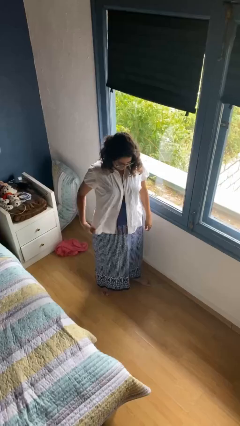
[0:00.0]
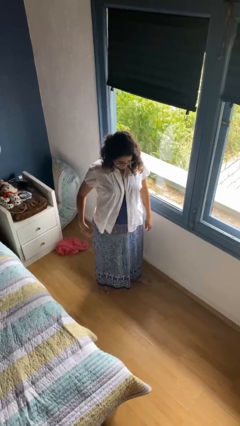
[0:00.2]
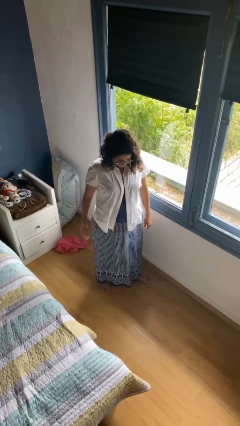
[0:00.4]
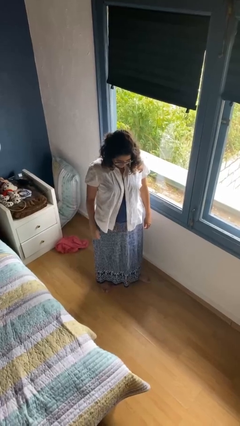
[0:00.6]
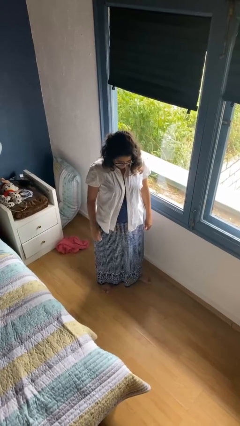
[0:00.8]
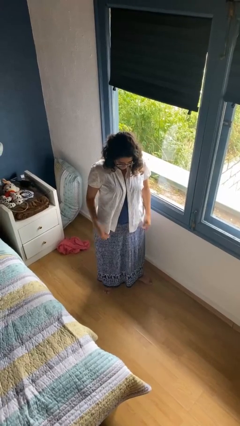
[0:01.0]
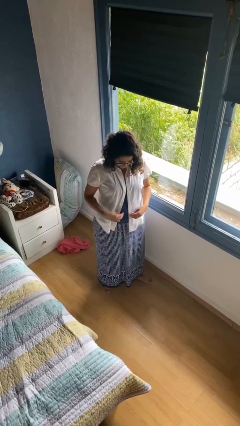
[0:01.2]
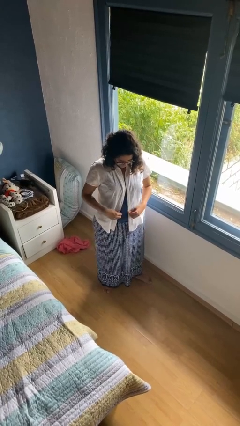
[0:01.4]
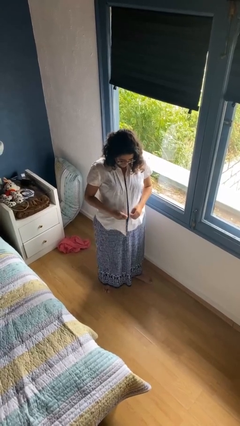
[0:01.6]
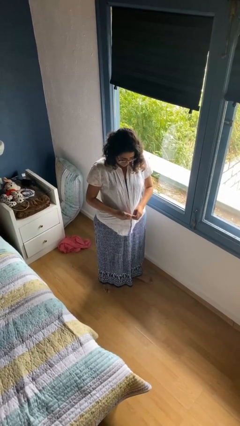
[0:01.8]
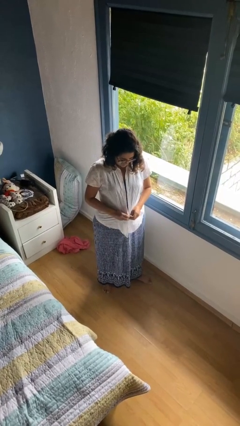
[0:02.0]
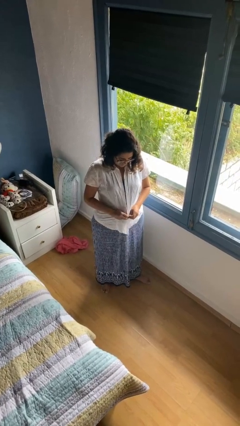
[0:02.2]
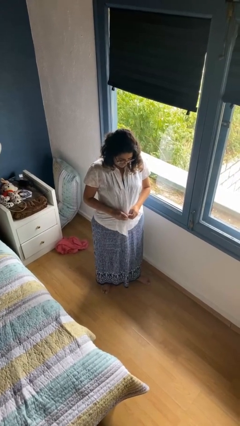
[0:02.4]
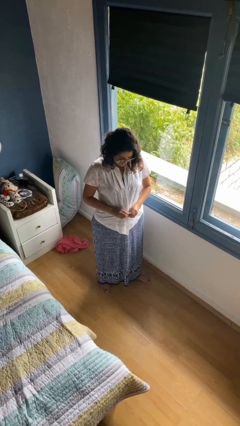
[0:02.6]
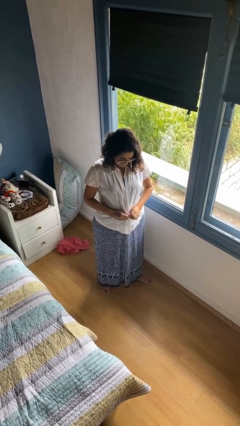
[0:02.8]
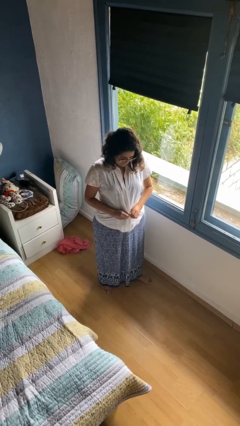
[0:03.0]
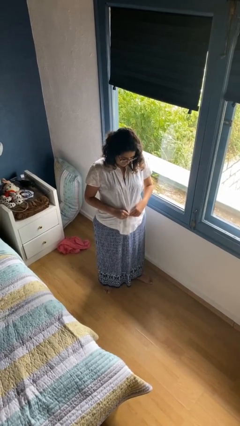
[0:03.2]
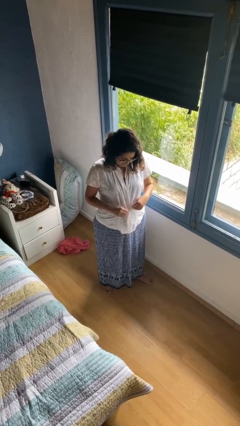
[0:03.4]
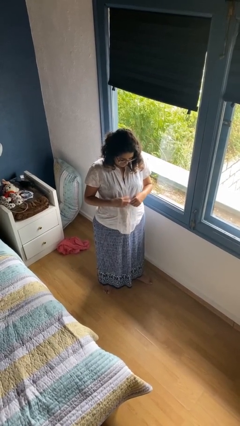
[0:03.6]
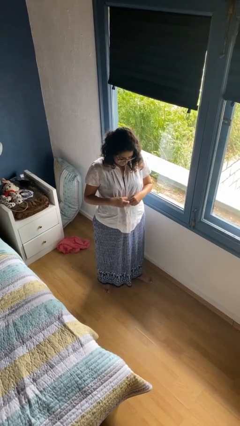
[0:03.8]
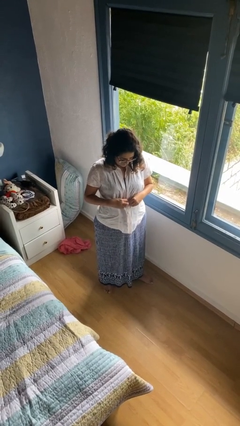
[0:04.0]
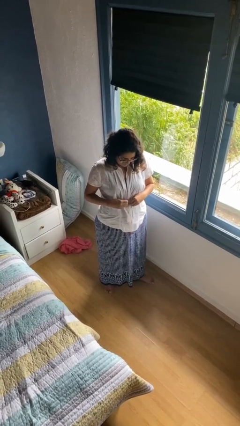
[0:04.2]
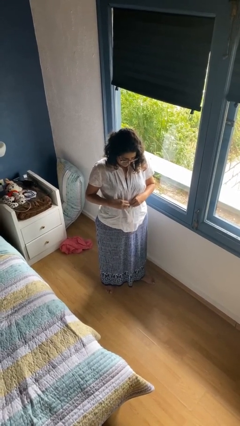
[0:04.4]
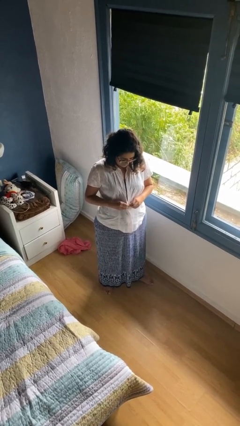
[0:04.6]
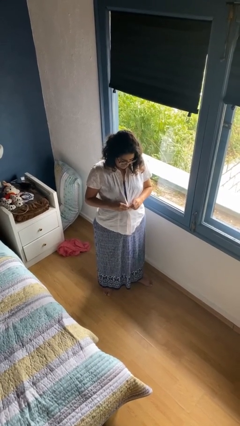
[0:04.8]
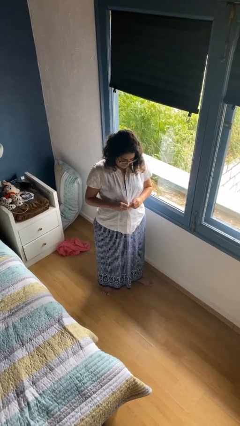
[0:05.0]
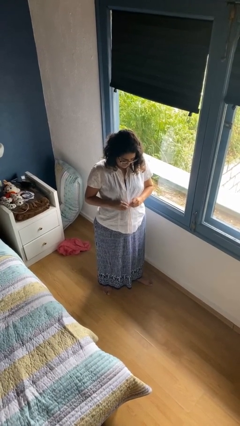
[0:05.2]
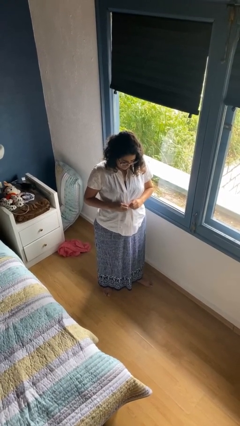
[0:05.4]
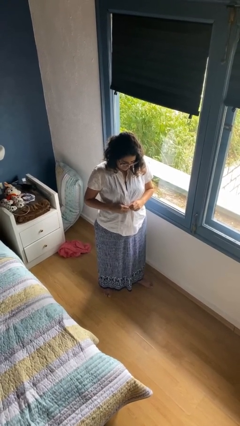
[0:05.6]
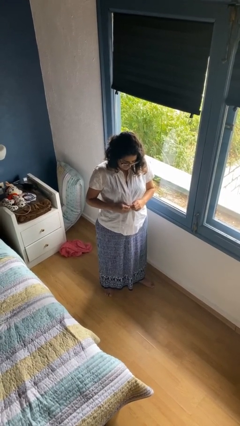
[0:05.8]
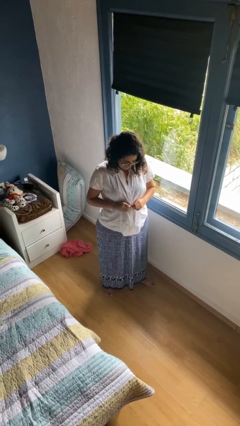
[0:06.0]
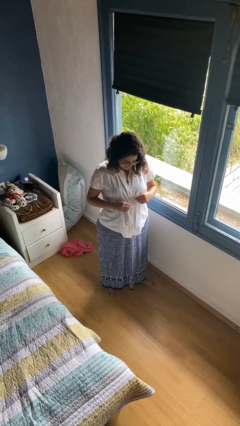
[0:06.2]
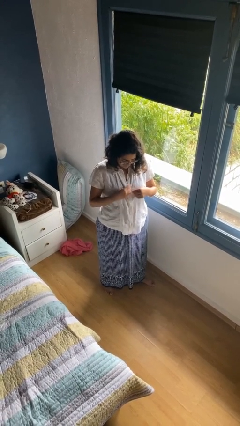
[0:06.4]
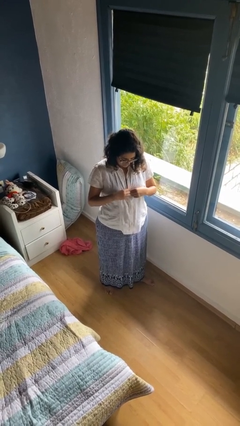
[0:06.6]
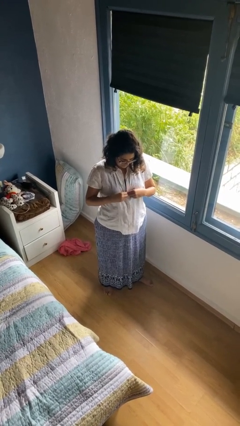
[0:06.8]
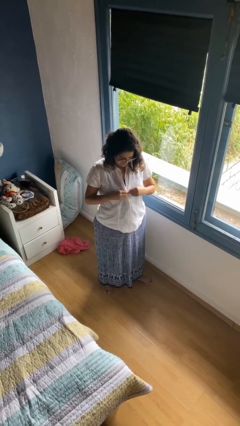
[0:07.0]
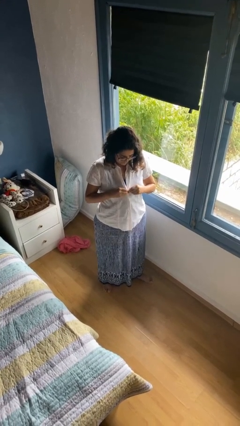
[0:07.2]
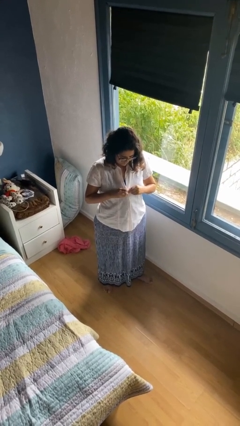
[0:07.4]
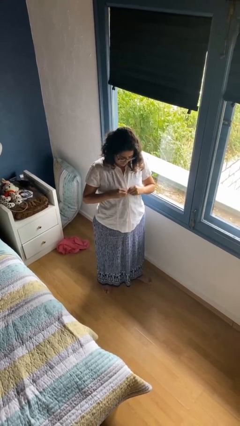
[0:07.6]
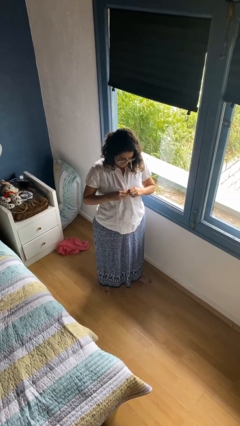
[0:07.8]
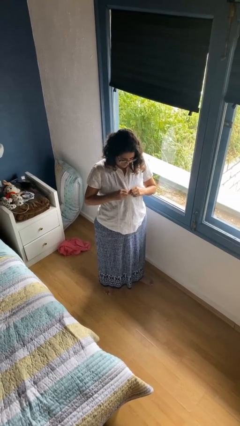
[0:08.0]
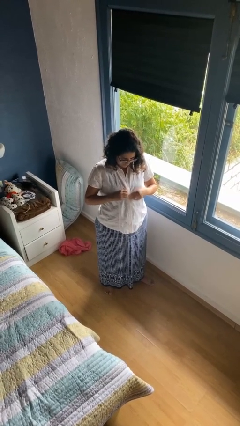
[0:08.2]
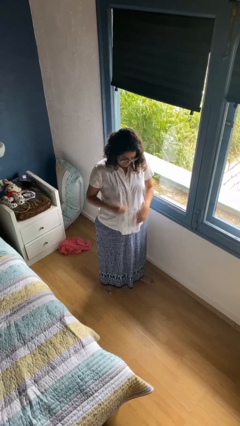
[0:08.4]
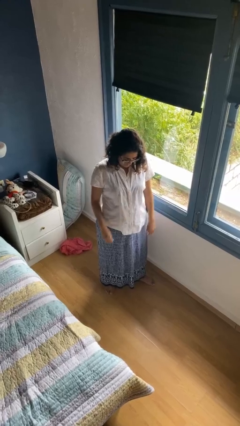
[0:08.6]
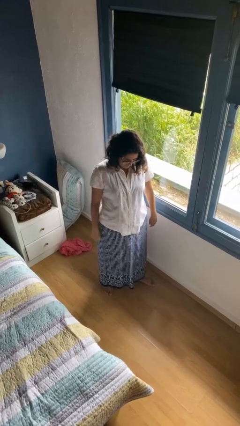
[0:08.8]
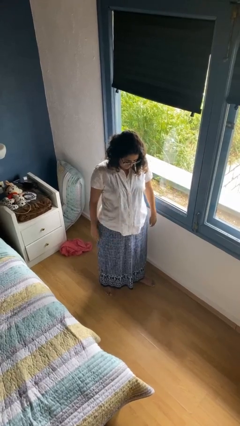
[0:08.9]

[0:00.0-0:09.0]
person buttons shirt

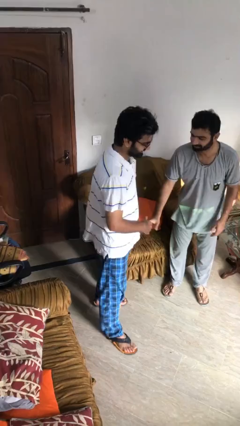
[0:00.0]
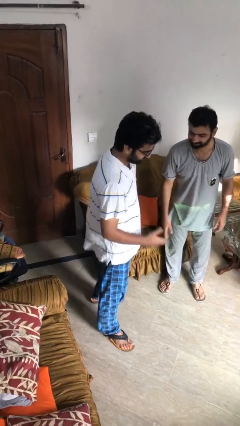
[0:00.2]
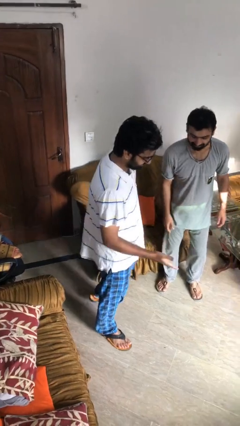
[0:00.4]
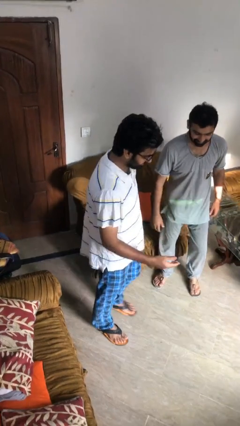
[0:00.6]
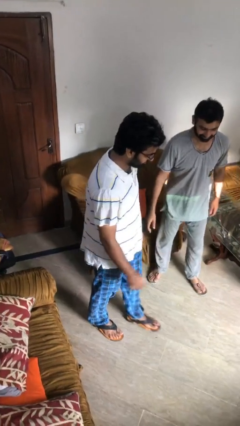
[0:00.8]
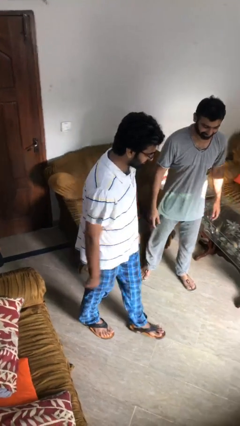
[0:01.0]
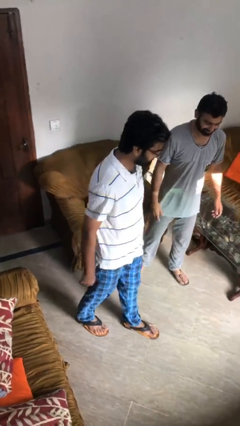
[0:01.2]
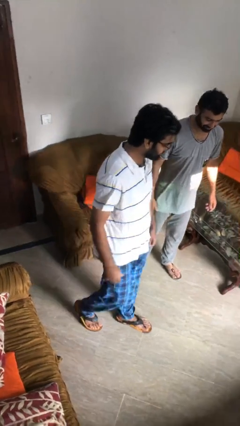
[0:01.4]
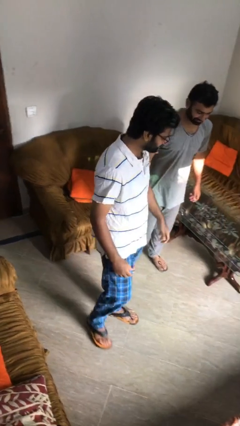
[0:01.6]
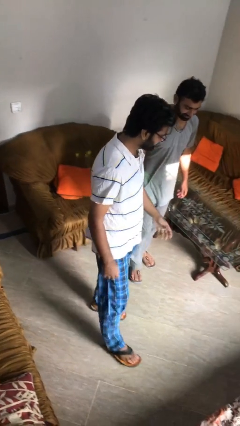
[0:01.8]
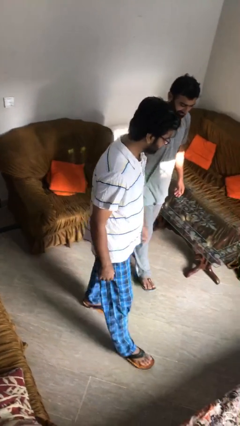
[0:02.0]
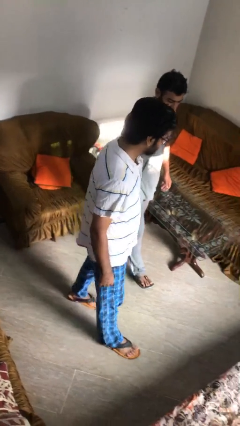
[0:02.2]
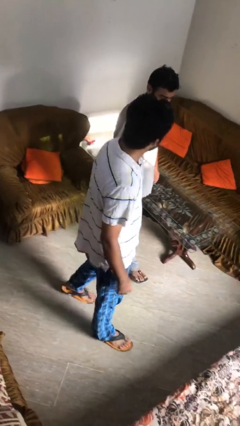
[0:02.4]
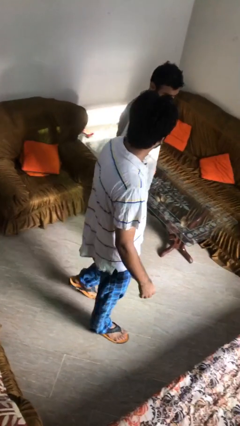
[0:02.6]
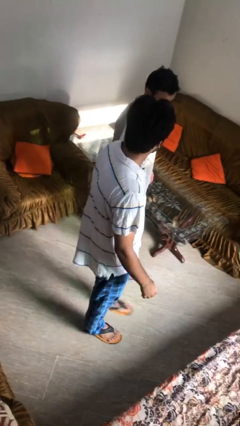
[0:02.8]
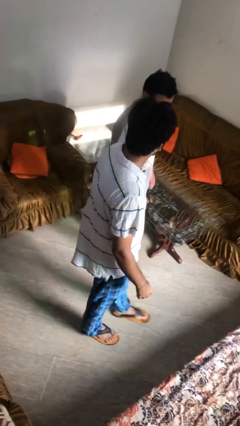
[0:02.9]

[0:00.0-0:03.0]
person talks to person

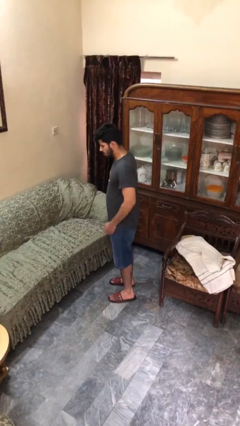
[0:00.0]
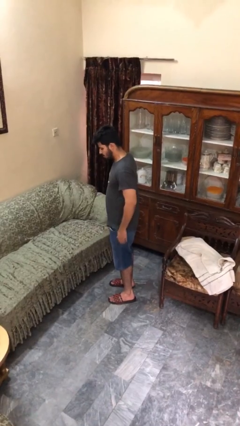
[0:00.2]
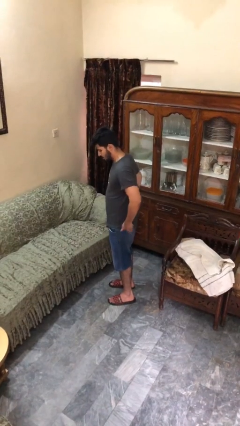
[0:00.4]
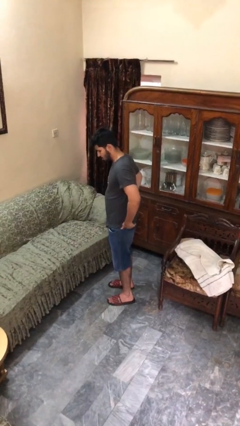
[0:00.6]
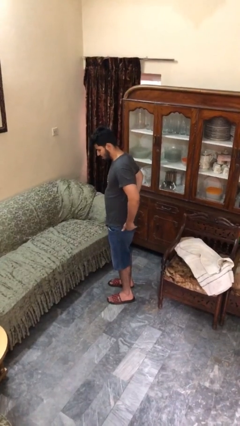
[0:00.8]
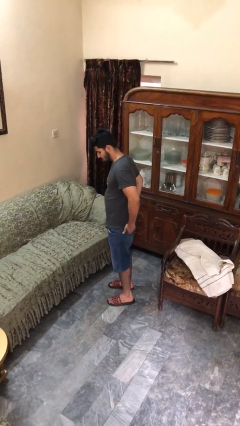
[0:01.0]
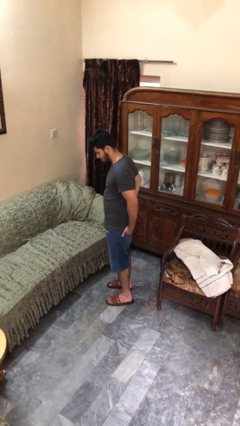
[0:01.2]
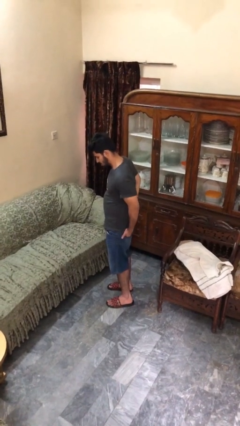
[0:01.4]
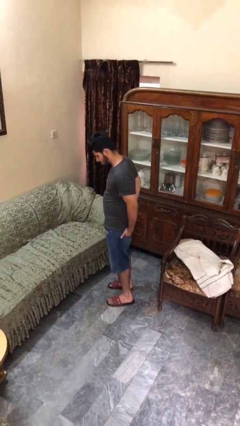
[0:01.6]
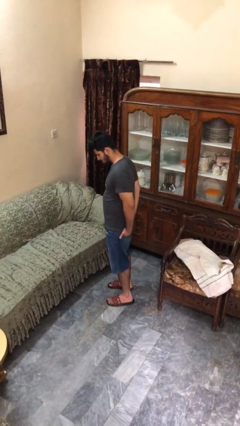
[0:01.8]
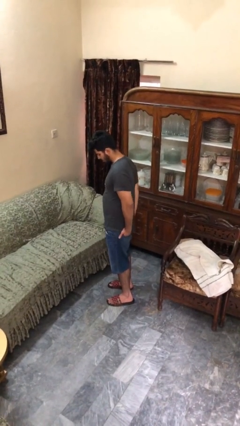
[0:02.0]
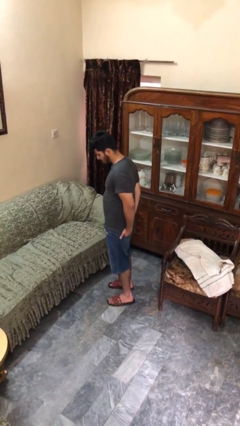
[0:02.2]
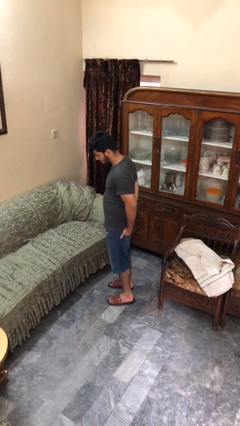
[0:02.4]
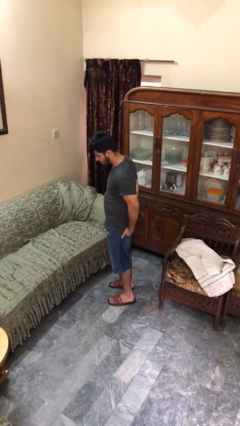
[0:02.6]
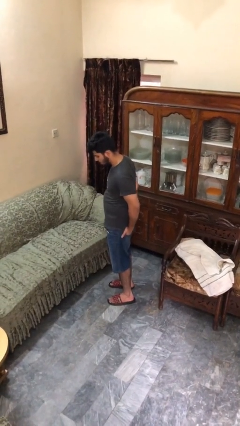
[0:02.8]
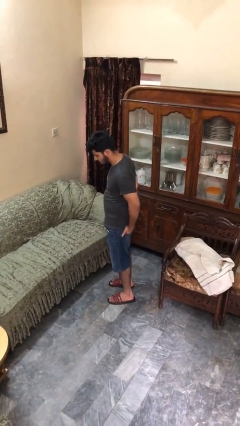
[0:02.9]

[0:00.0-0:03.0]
person puts hands in back pockets

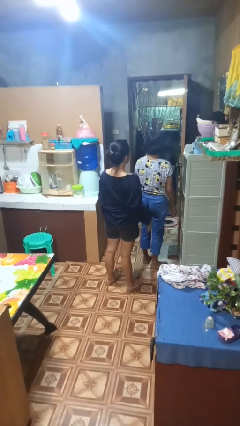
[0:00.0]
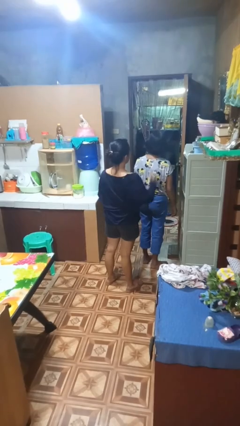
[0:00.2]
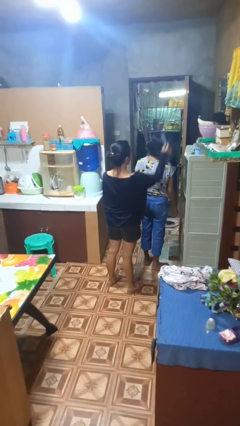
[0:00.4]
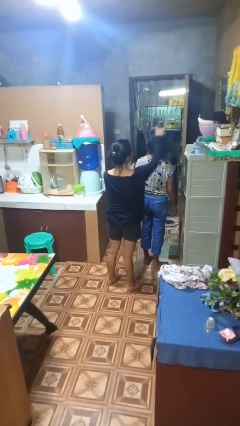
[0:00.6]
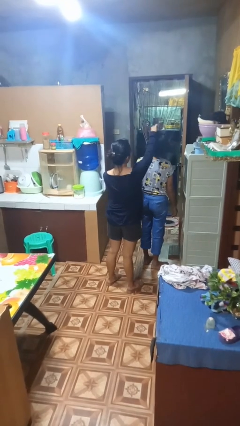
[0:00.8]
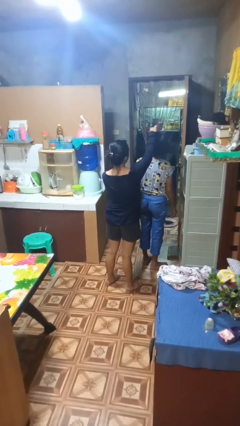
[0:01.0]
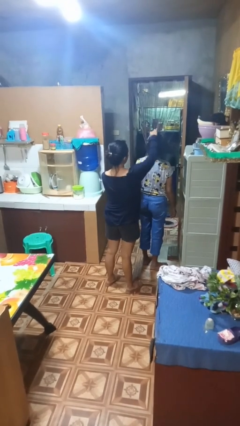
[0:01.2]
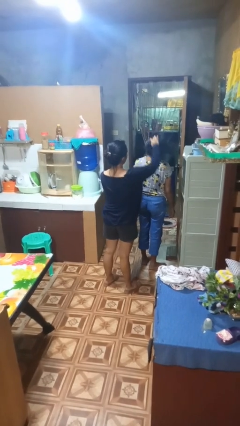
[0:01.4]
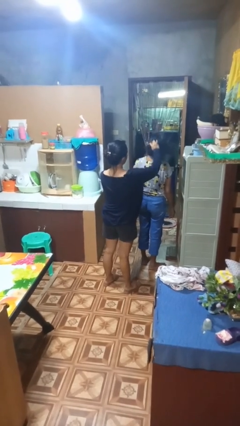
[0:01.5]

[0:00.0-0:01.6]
person brushes hair of person

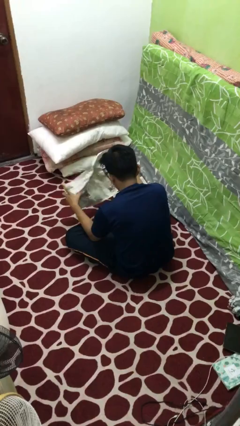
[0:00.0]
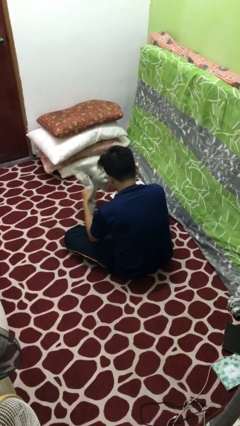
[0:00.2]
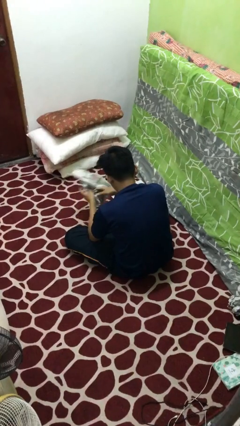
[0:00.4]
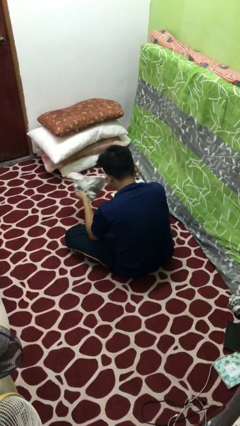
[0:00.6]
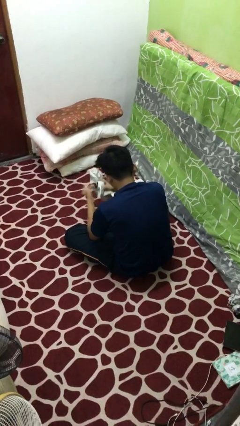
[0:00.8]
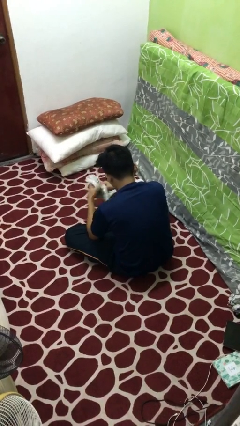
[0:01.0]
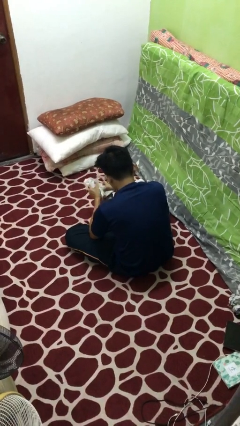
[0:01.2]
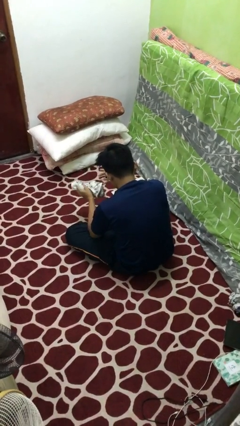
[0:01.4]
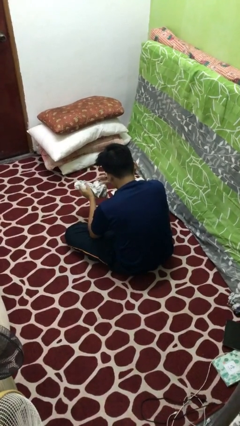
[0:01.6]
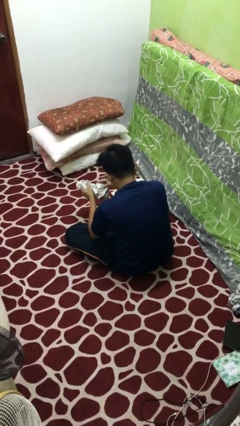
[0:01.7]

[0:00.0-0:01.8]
person crumples paper
